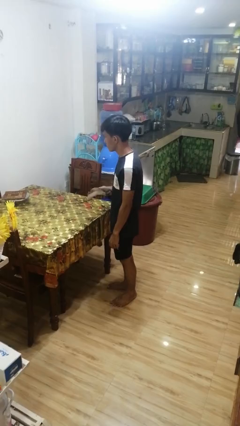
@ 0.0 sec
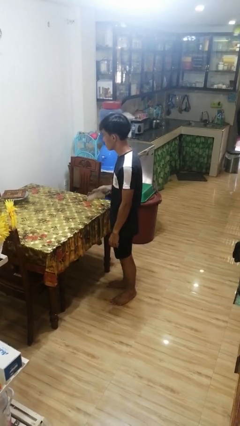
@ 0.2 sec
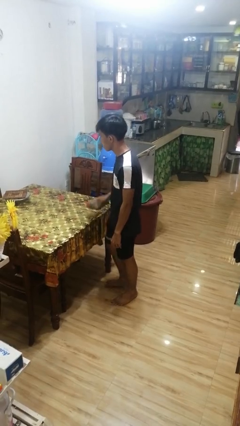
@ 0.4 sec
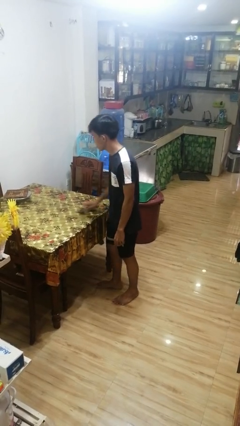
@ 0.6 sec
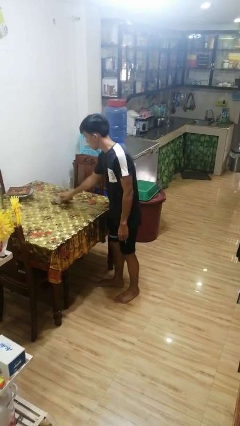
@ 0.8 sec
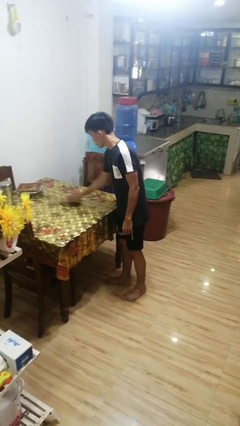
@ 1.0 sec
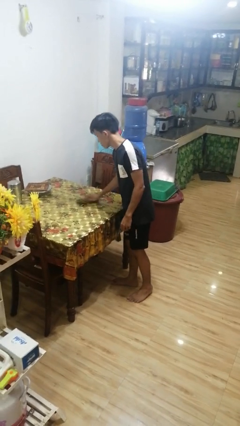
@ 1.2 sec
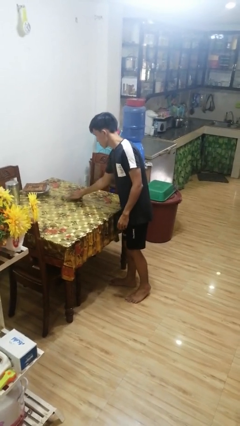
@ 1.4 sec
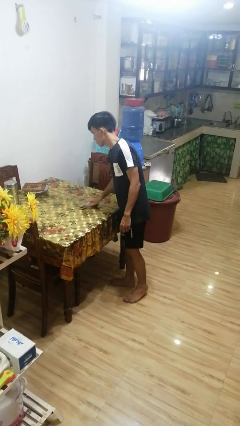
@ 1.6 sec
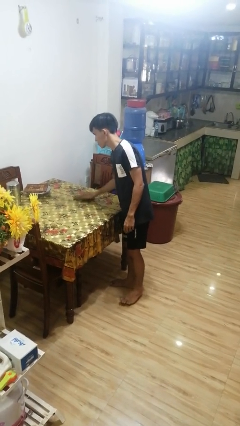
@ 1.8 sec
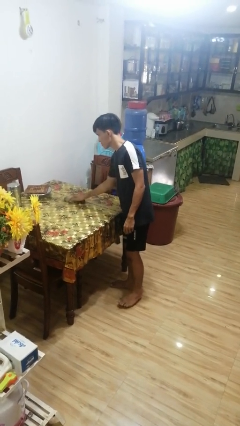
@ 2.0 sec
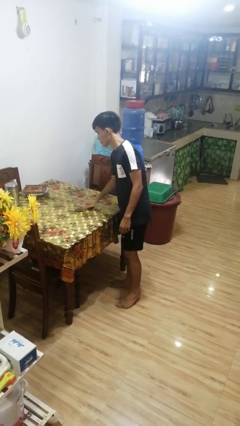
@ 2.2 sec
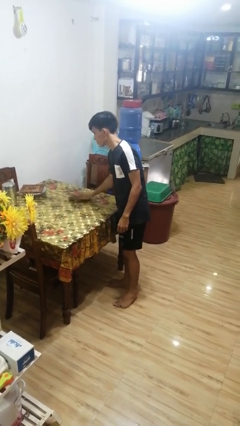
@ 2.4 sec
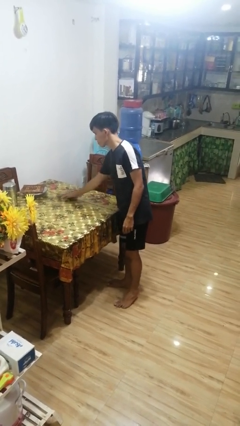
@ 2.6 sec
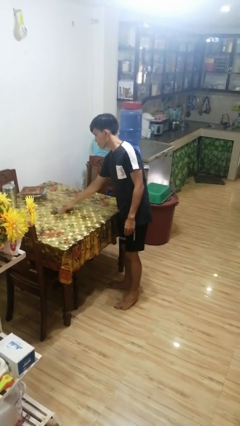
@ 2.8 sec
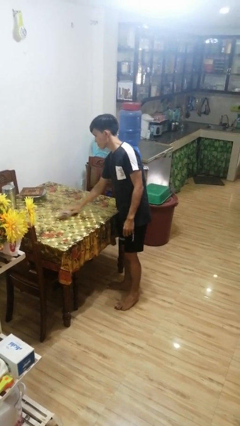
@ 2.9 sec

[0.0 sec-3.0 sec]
person cleans table with rag

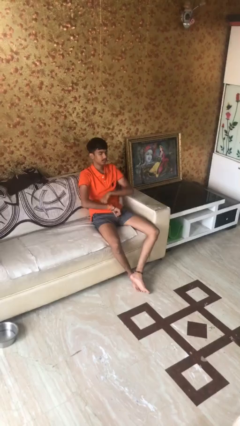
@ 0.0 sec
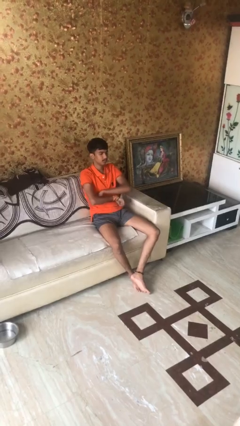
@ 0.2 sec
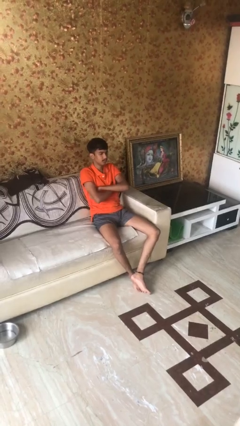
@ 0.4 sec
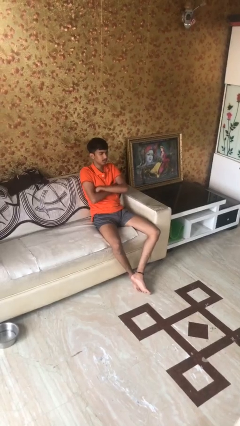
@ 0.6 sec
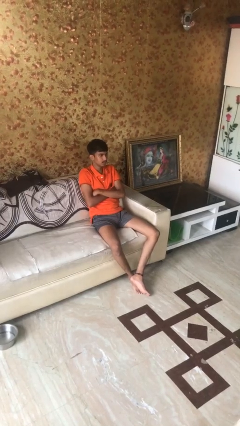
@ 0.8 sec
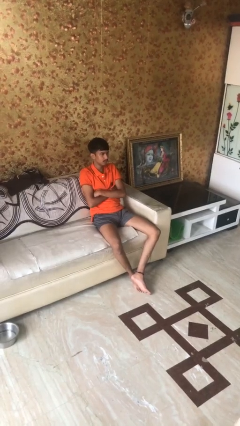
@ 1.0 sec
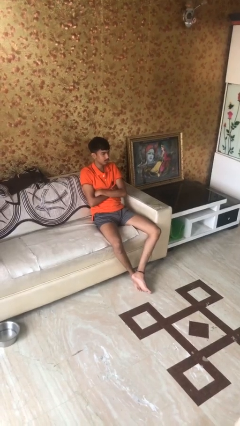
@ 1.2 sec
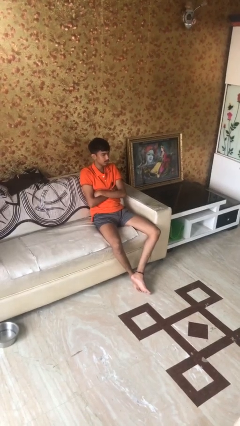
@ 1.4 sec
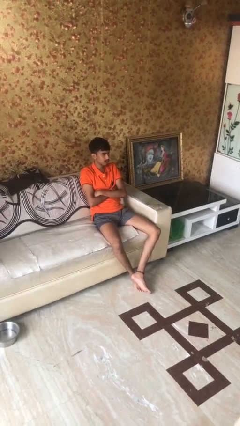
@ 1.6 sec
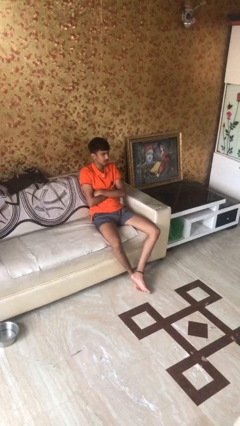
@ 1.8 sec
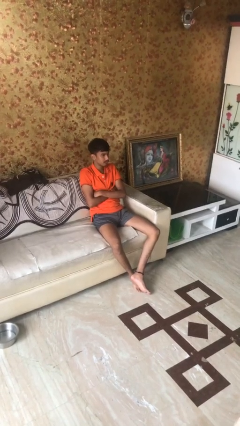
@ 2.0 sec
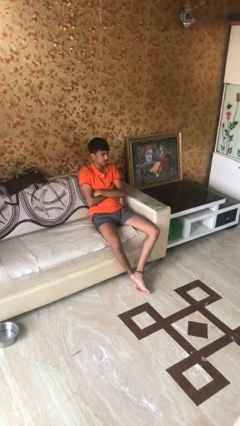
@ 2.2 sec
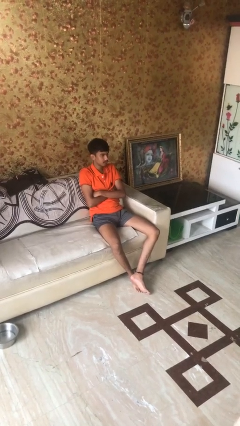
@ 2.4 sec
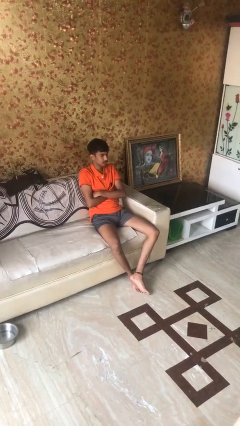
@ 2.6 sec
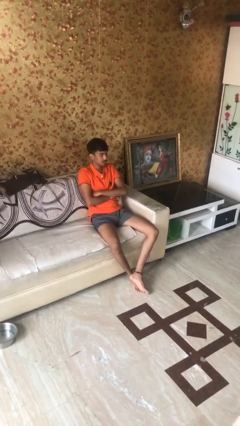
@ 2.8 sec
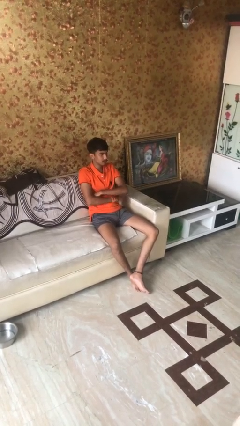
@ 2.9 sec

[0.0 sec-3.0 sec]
person crosses arms

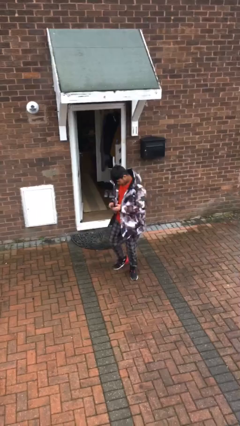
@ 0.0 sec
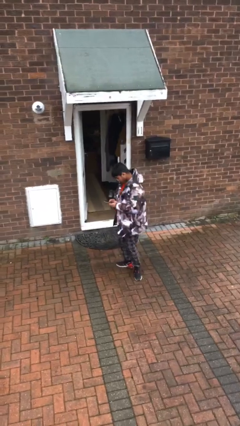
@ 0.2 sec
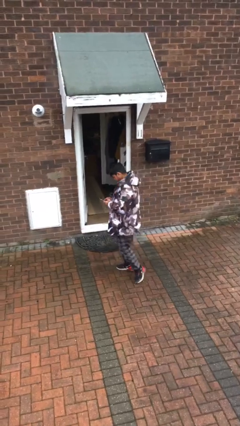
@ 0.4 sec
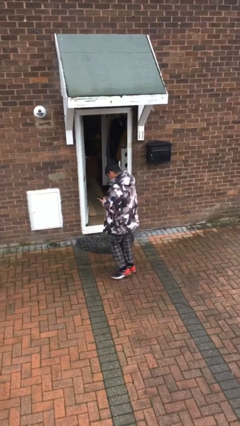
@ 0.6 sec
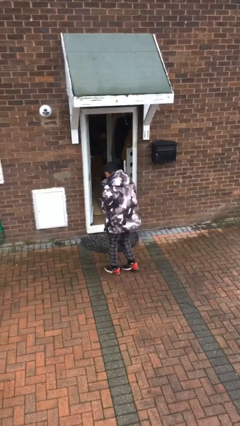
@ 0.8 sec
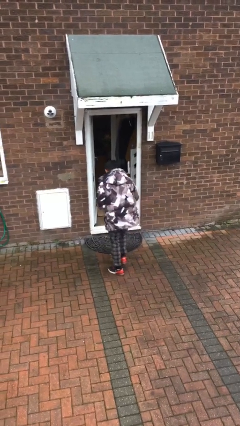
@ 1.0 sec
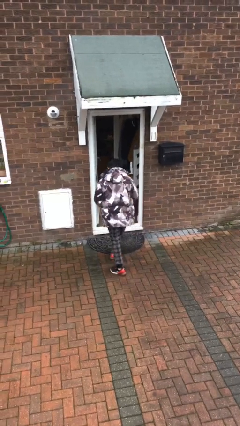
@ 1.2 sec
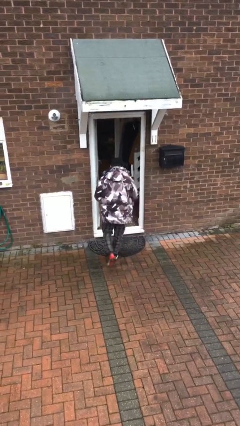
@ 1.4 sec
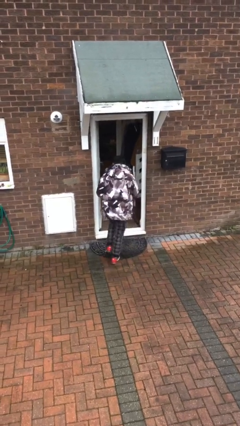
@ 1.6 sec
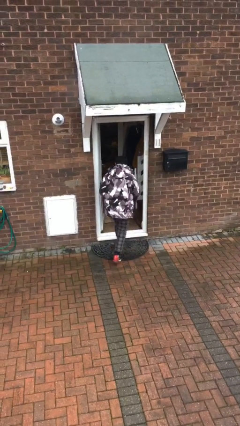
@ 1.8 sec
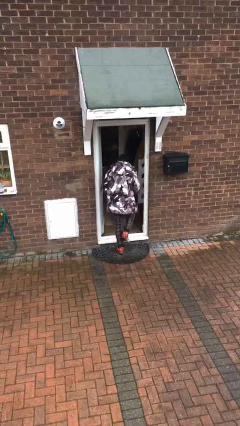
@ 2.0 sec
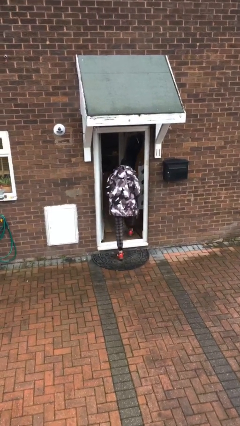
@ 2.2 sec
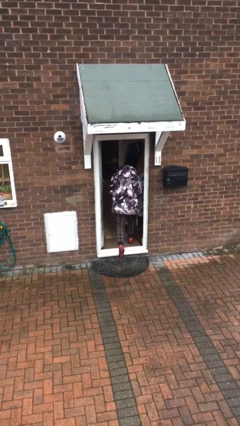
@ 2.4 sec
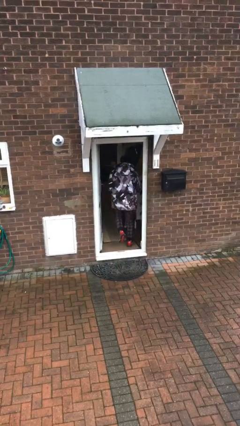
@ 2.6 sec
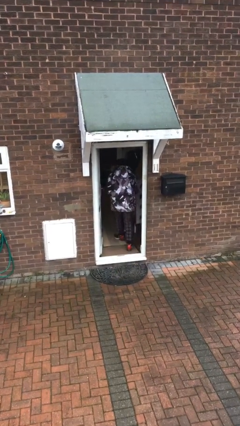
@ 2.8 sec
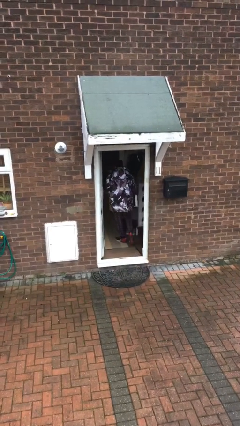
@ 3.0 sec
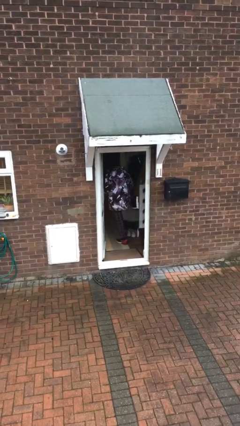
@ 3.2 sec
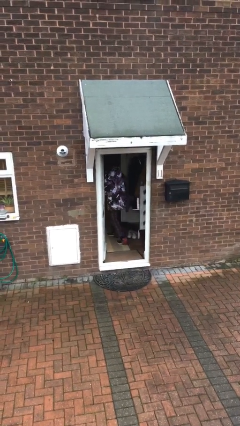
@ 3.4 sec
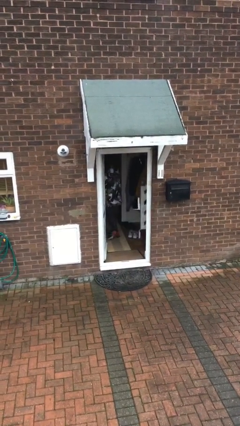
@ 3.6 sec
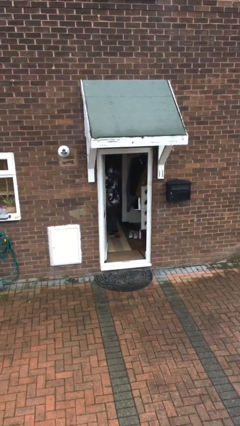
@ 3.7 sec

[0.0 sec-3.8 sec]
person exits scene through structure

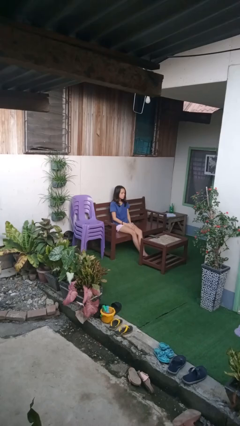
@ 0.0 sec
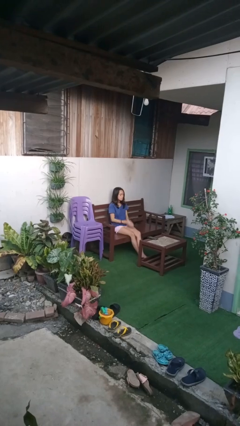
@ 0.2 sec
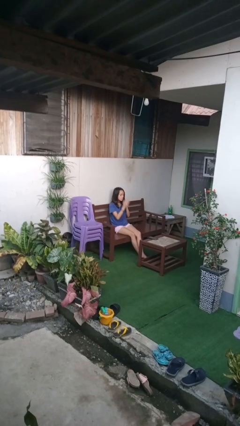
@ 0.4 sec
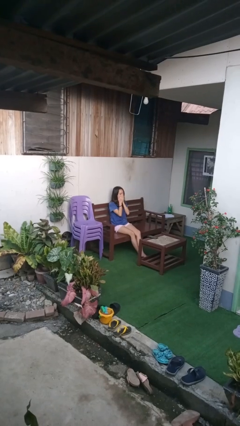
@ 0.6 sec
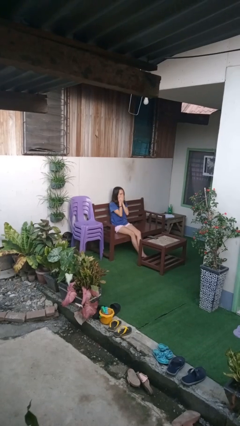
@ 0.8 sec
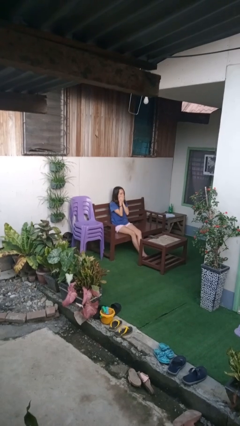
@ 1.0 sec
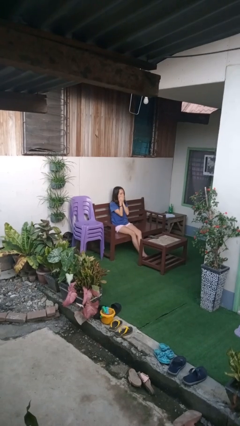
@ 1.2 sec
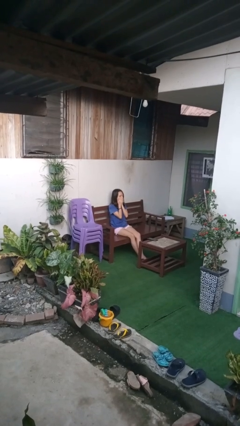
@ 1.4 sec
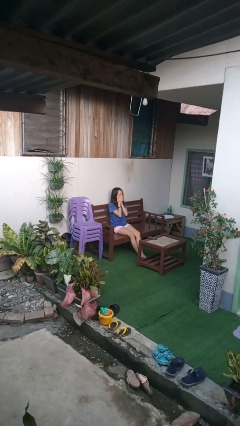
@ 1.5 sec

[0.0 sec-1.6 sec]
person yawns

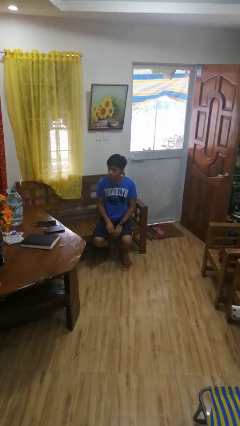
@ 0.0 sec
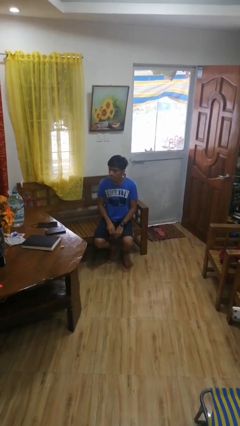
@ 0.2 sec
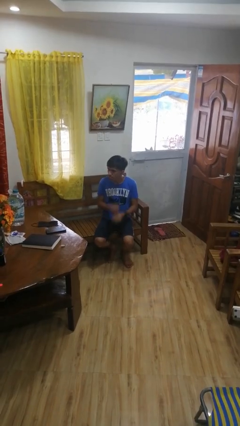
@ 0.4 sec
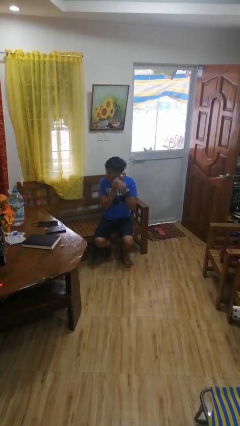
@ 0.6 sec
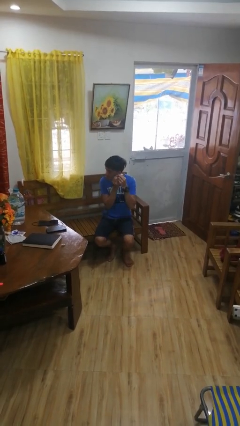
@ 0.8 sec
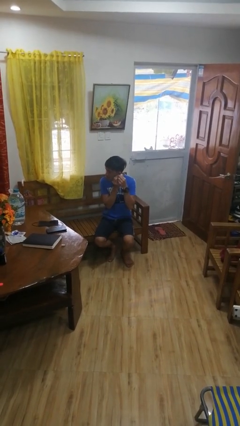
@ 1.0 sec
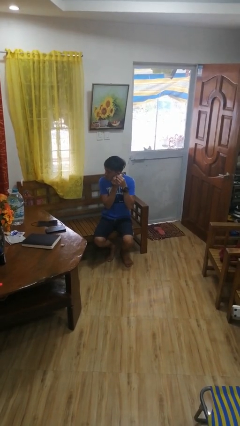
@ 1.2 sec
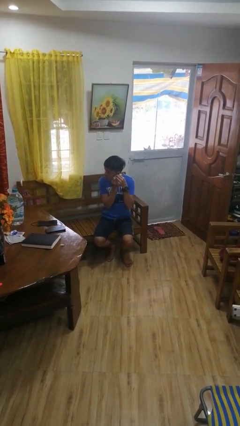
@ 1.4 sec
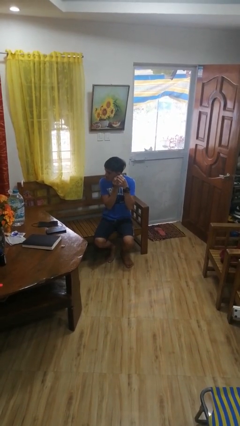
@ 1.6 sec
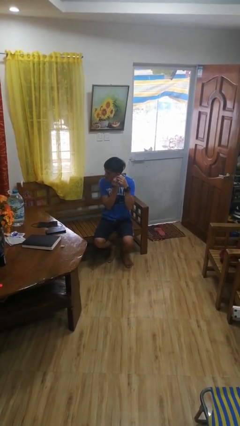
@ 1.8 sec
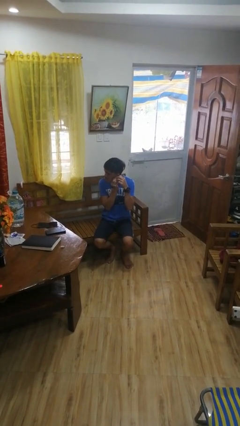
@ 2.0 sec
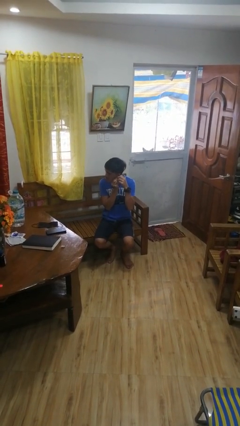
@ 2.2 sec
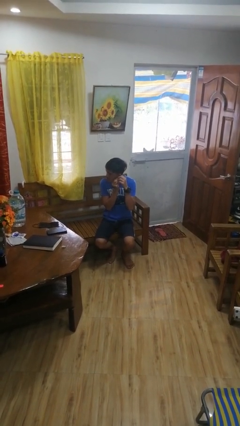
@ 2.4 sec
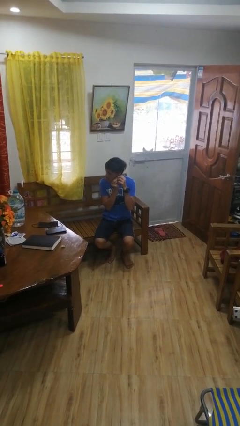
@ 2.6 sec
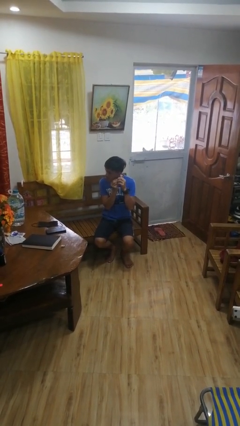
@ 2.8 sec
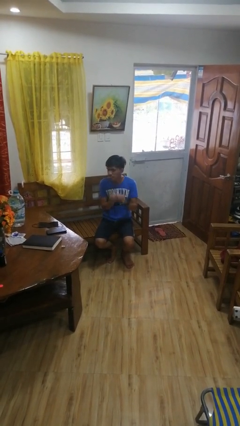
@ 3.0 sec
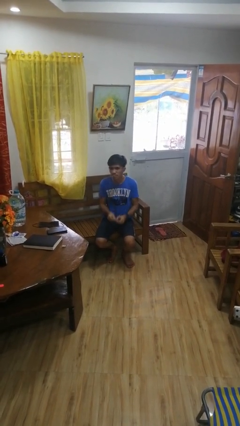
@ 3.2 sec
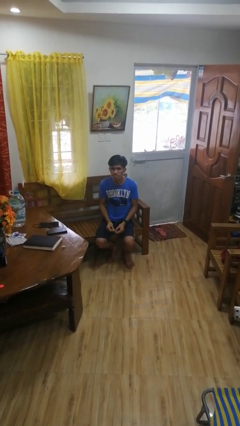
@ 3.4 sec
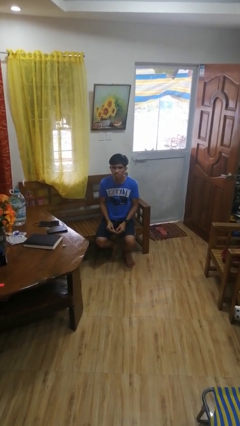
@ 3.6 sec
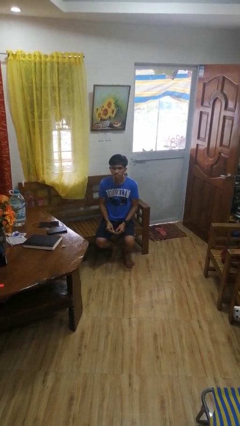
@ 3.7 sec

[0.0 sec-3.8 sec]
person takes off earrings

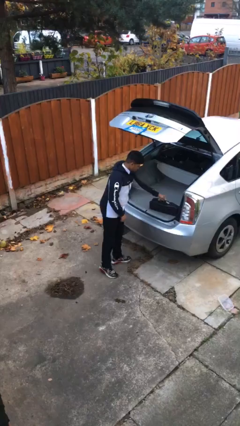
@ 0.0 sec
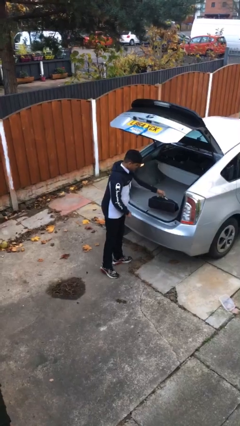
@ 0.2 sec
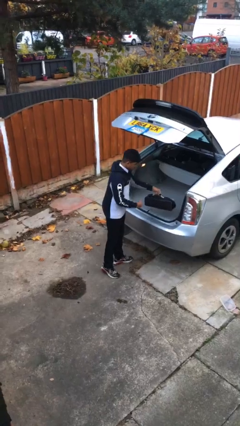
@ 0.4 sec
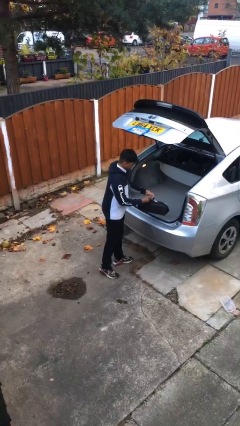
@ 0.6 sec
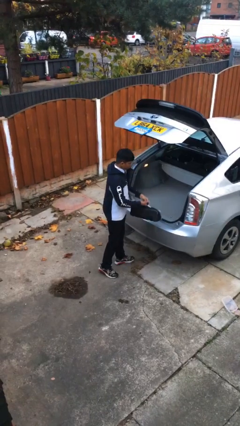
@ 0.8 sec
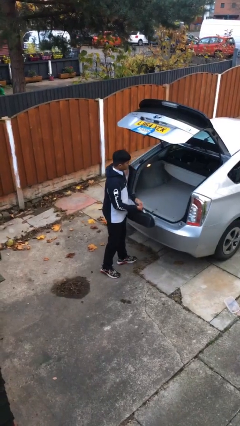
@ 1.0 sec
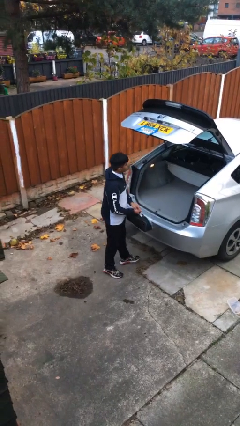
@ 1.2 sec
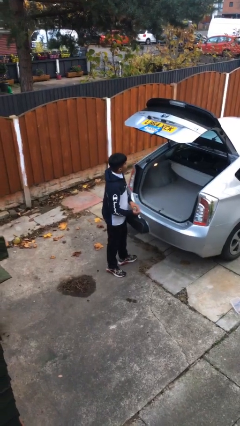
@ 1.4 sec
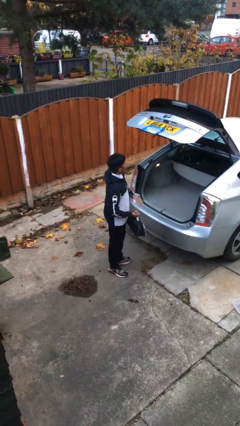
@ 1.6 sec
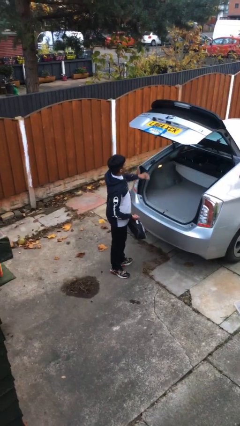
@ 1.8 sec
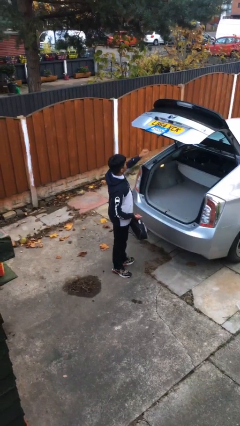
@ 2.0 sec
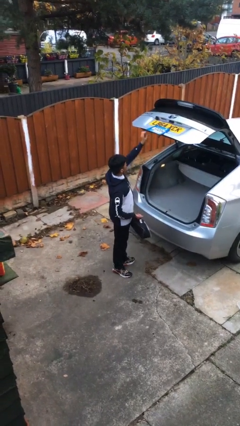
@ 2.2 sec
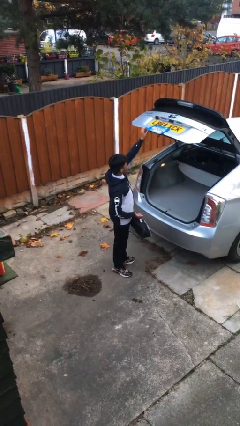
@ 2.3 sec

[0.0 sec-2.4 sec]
person unloads car
